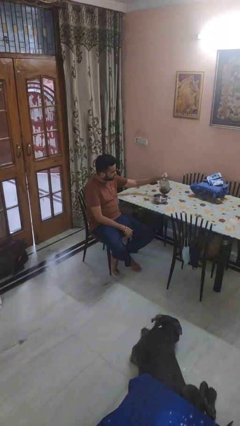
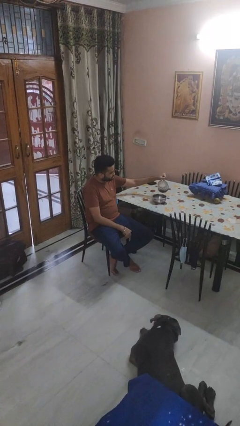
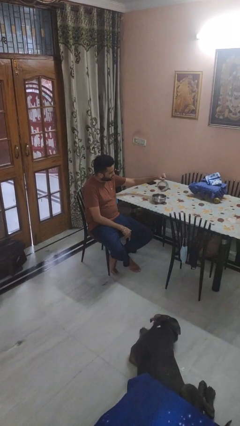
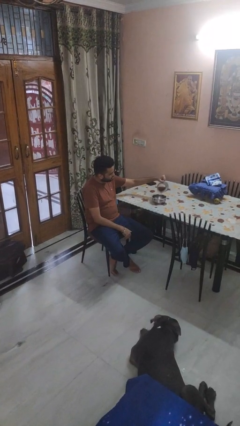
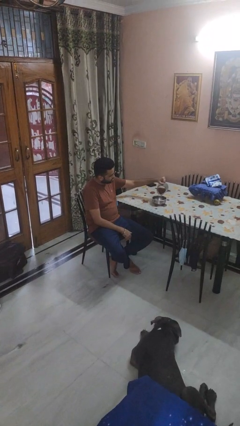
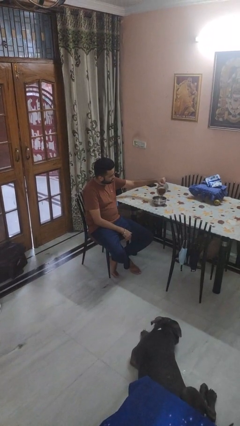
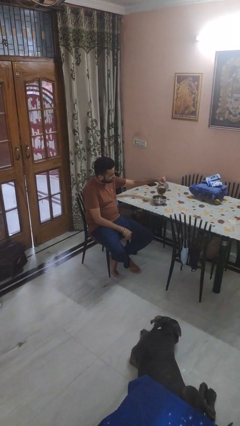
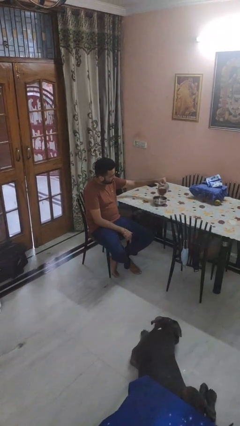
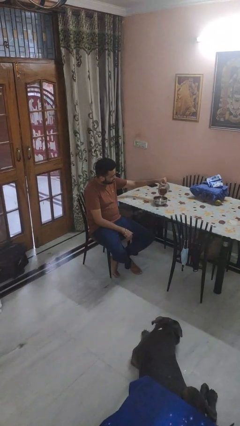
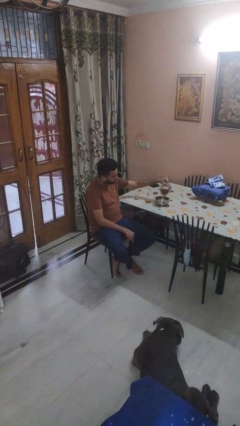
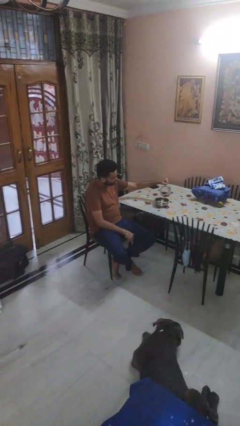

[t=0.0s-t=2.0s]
person pours into bowl

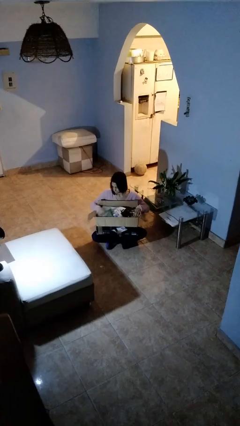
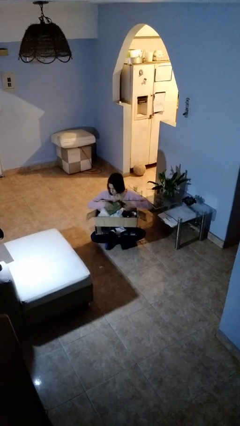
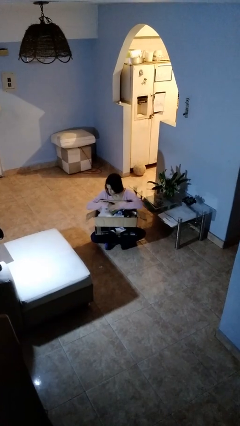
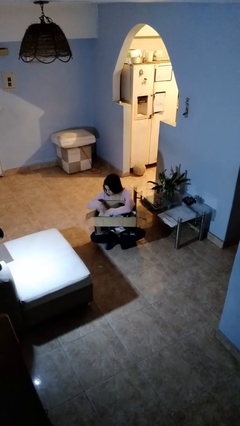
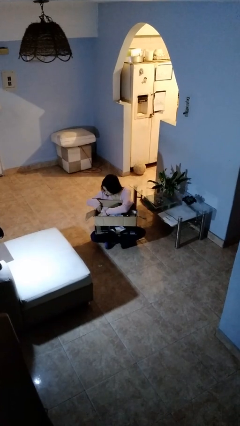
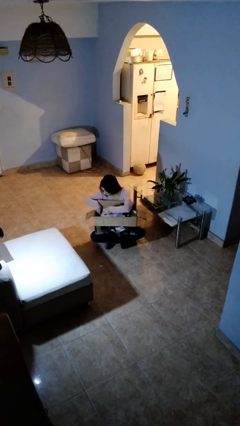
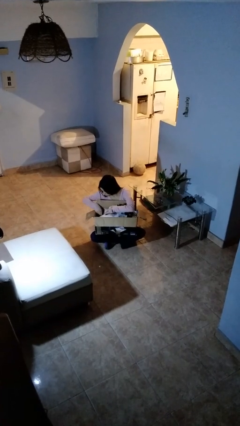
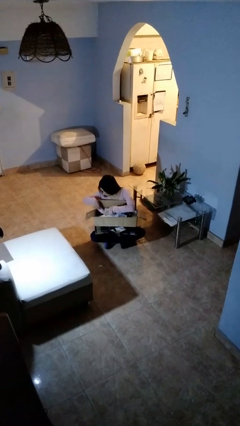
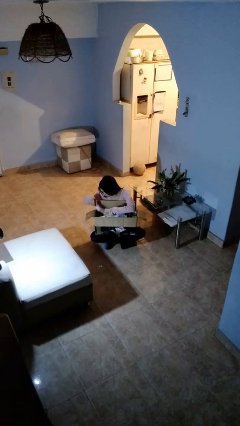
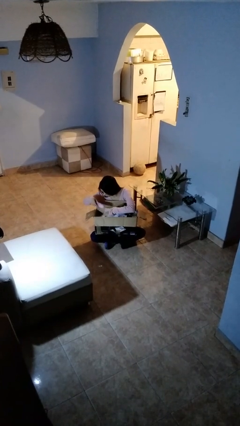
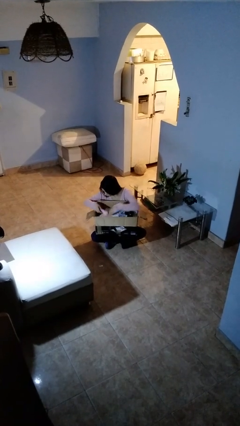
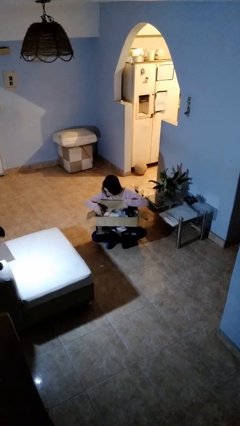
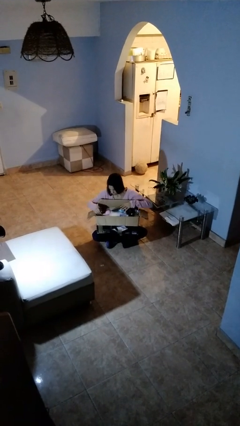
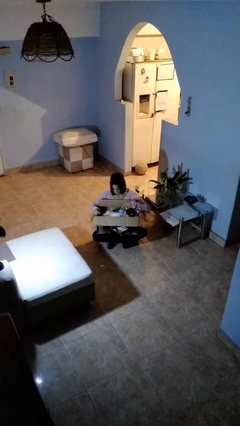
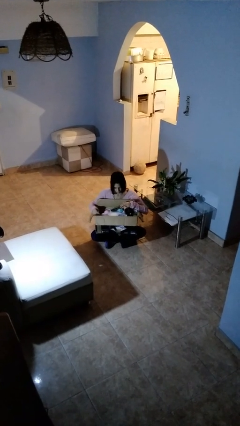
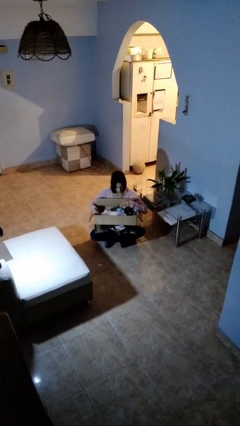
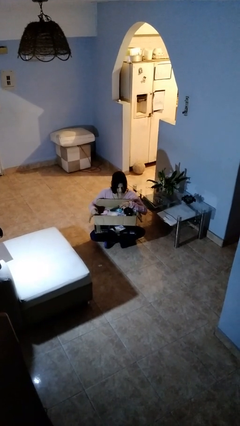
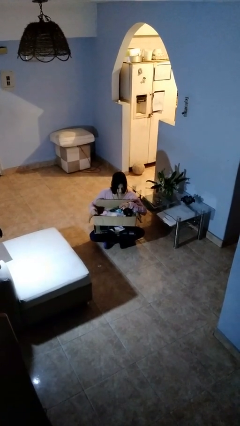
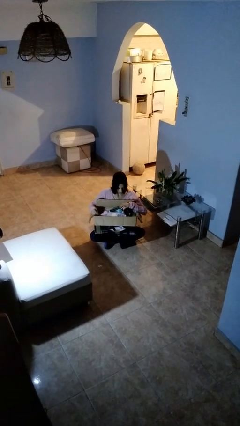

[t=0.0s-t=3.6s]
person searches in box

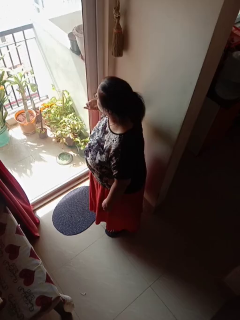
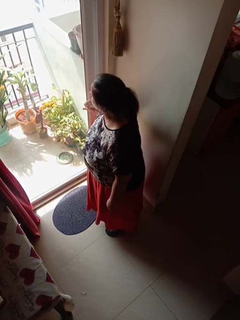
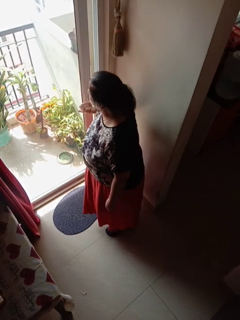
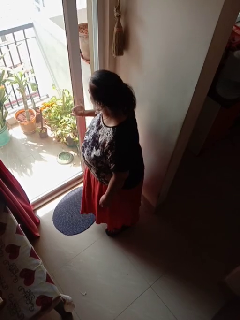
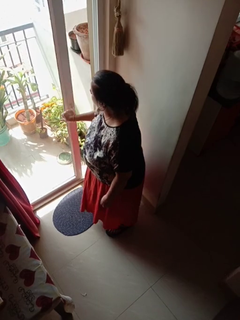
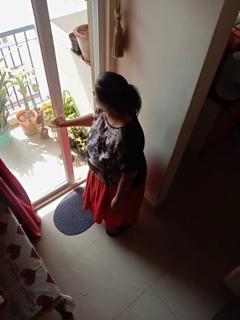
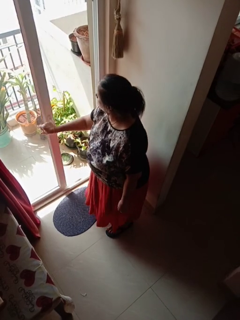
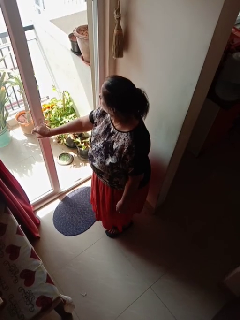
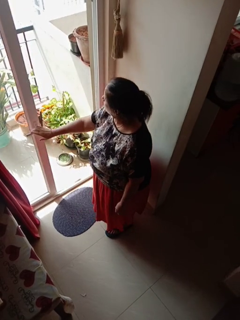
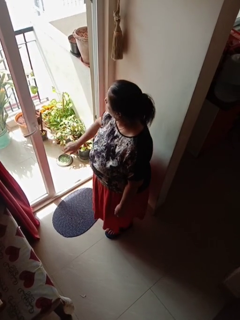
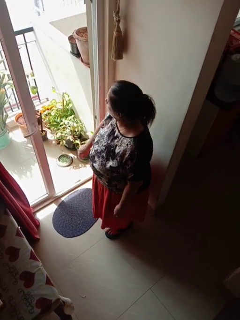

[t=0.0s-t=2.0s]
person opens sliding door

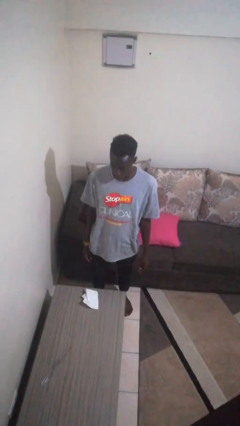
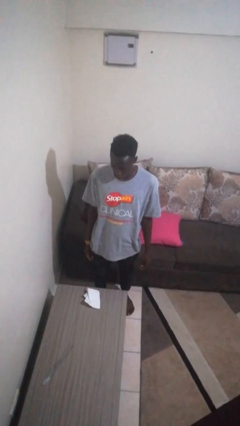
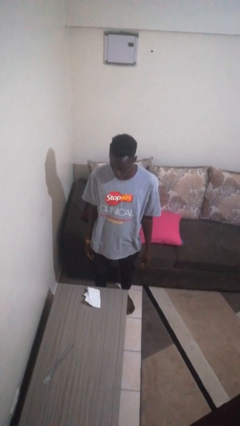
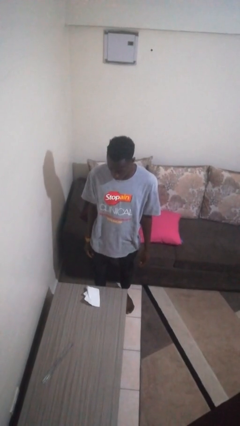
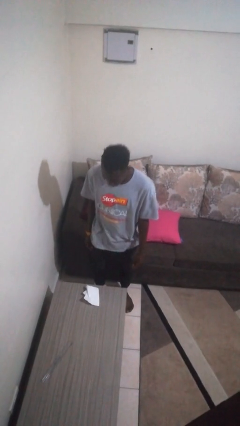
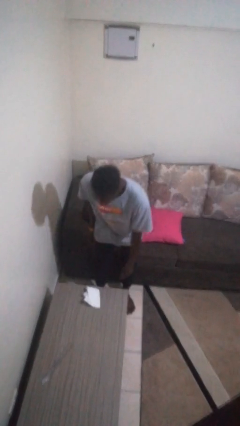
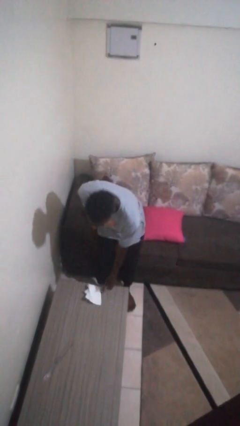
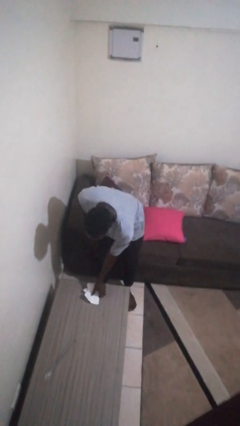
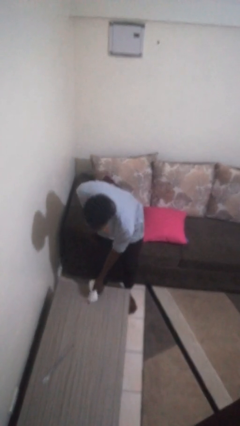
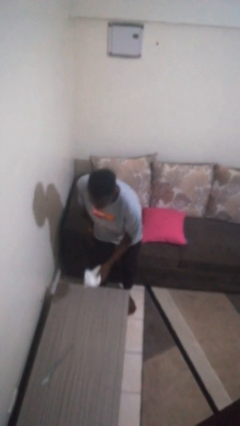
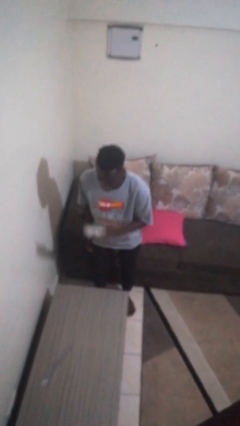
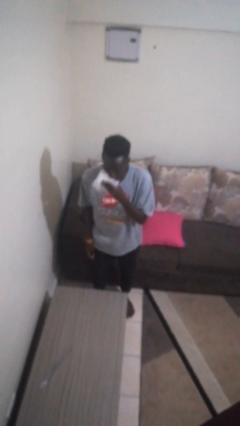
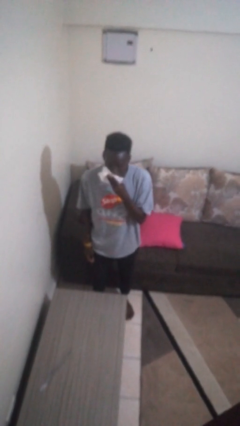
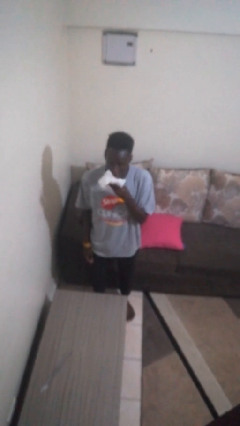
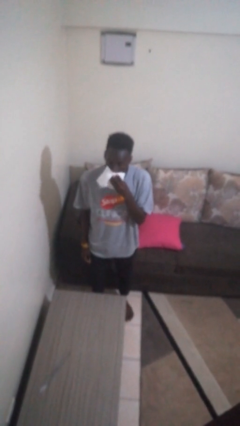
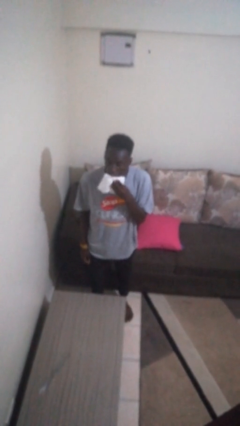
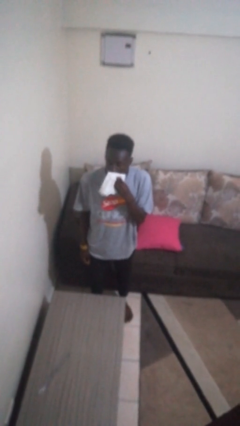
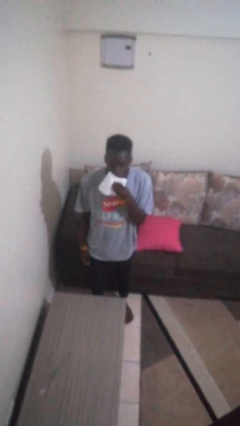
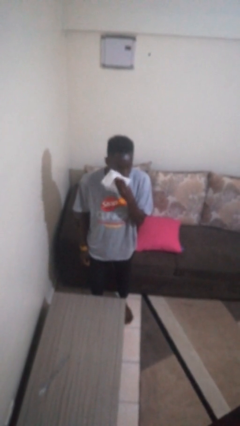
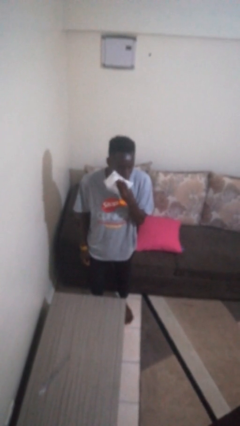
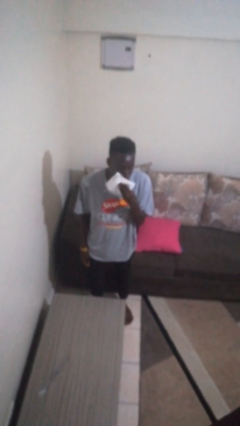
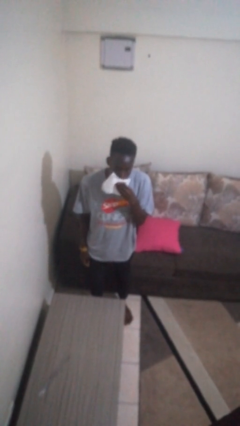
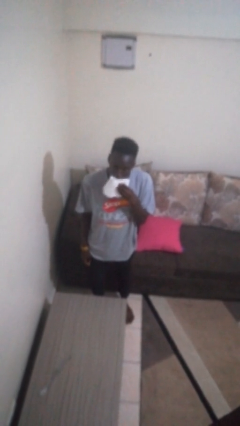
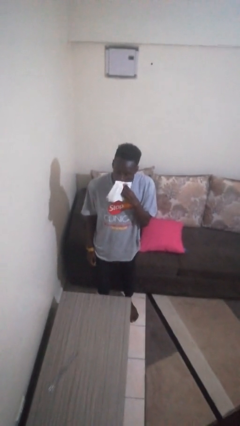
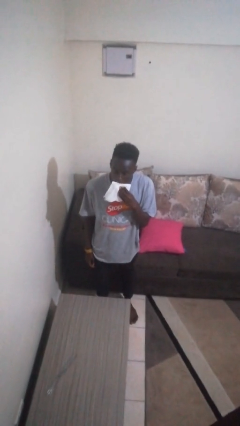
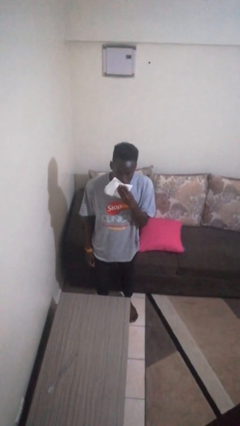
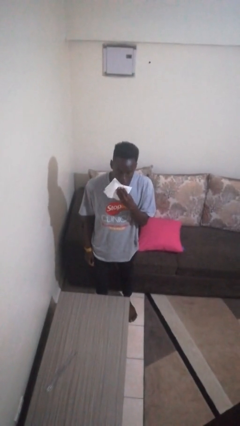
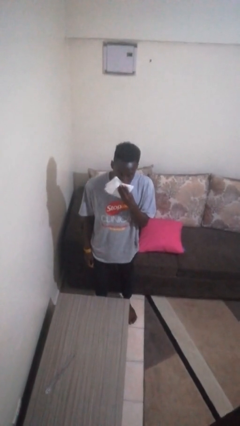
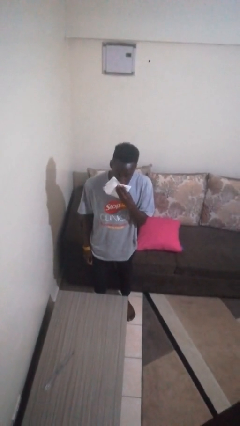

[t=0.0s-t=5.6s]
person wipes mouth with napkin

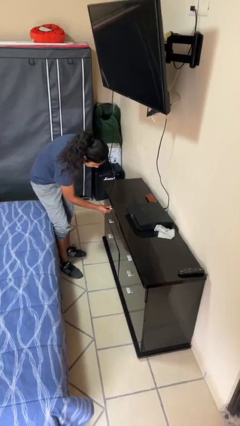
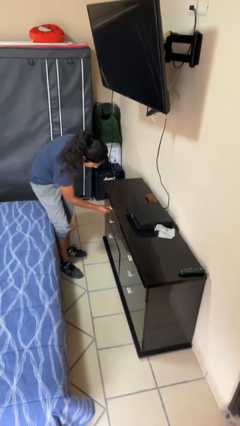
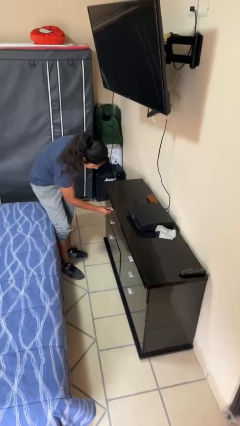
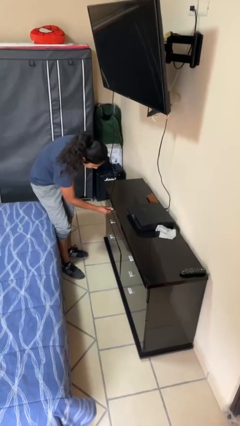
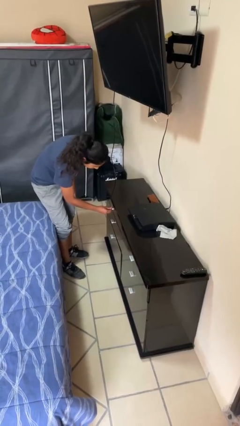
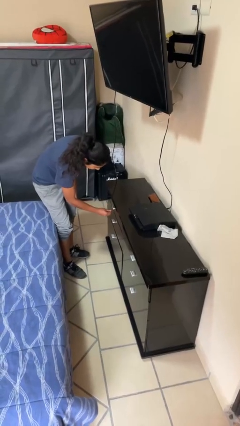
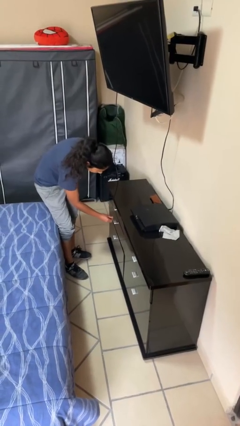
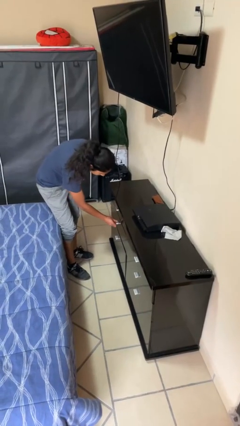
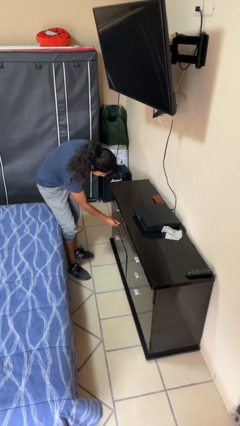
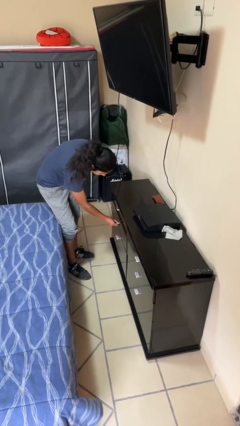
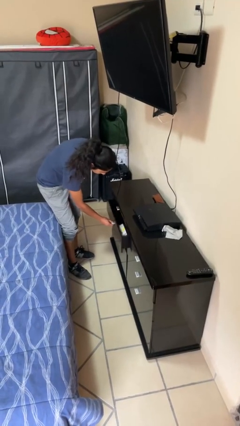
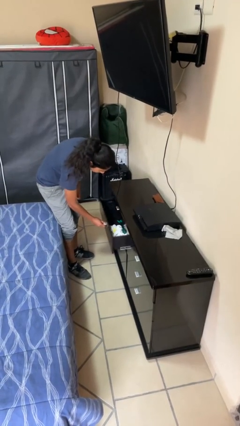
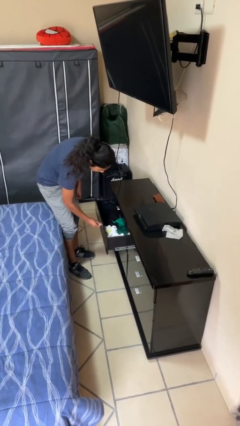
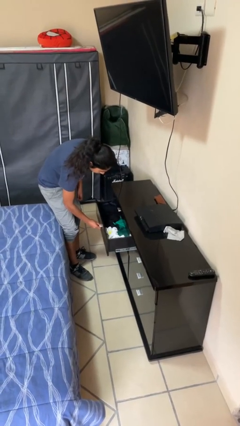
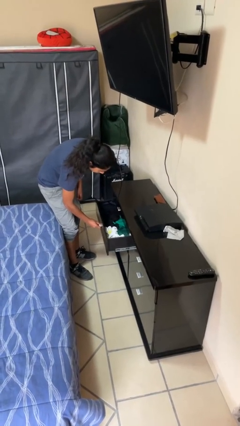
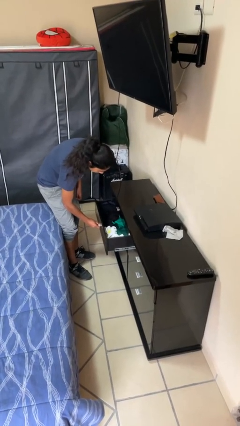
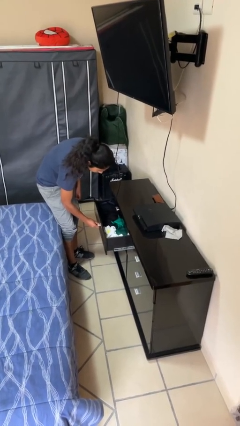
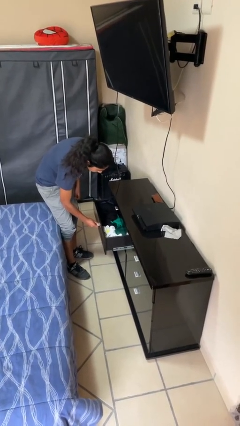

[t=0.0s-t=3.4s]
person opens dresser drawer

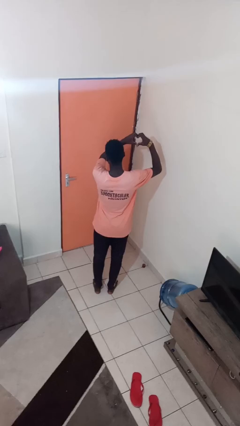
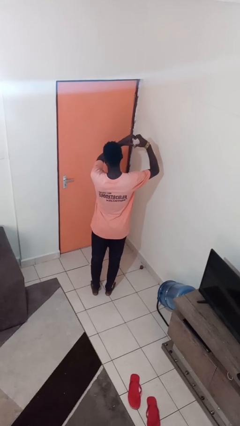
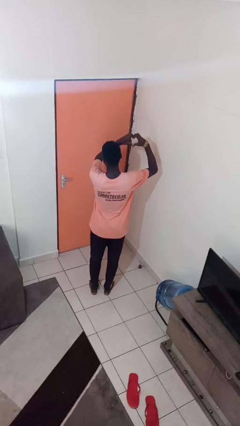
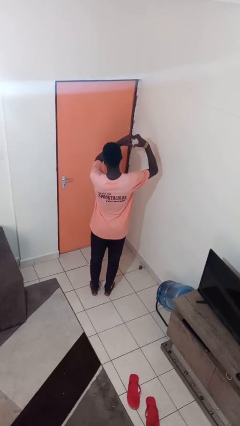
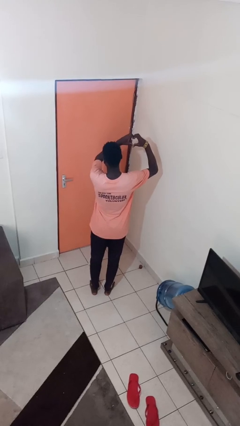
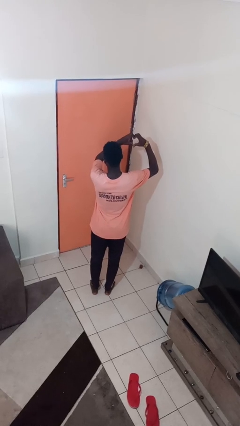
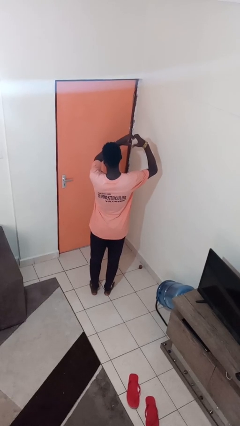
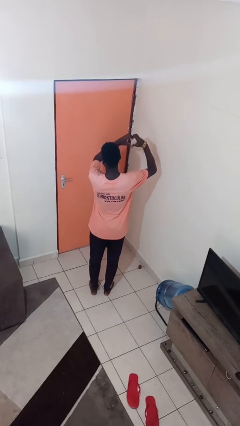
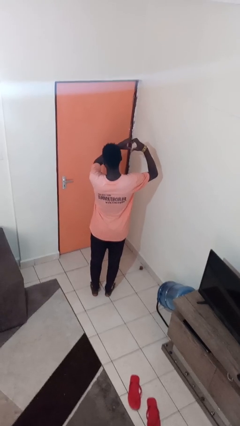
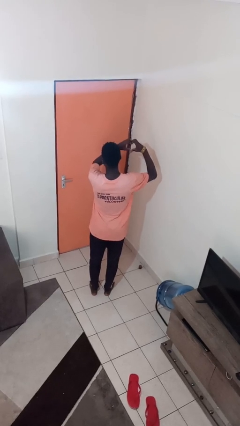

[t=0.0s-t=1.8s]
person gestures heart
